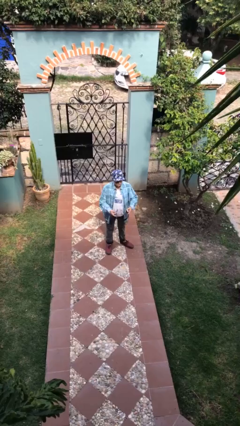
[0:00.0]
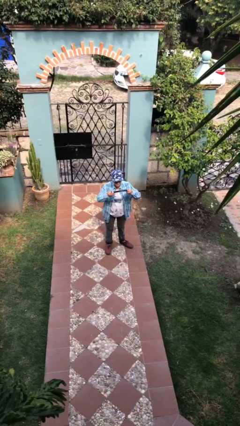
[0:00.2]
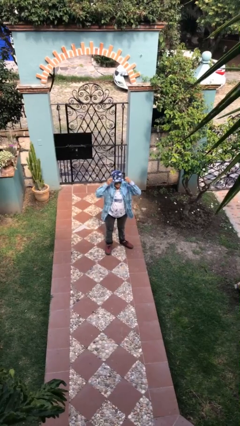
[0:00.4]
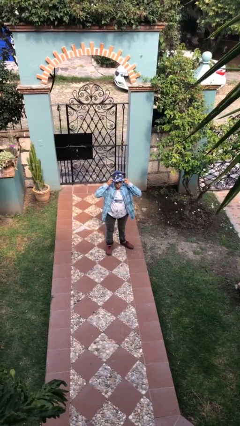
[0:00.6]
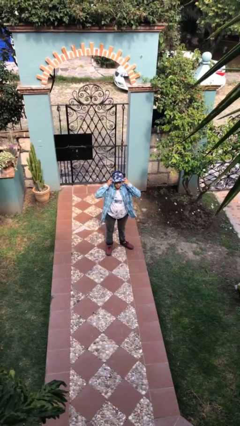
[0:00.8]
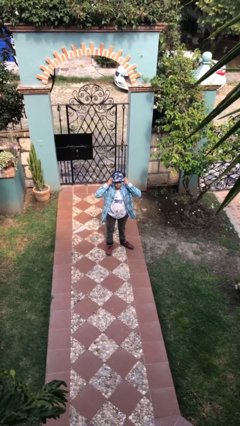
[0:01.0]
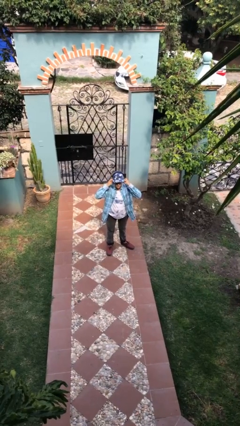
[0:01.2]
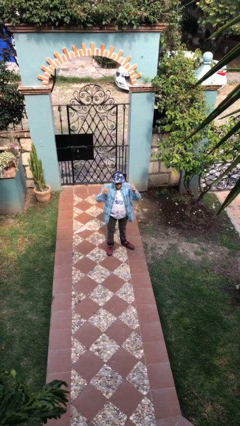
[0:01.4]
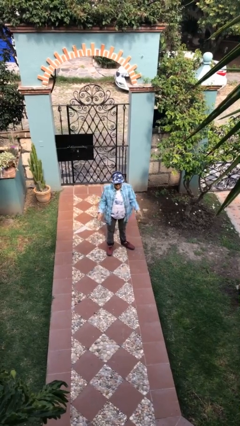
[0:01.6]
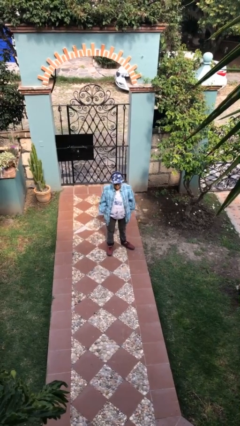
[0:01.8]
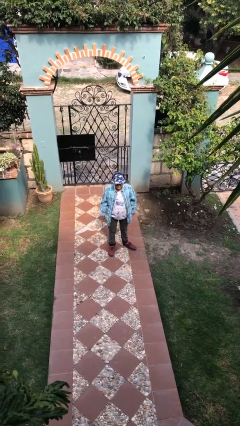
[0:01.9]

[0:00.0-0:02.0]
person puts on headphones

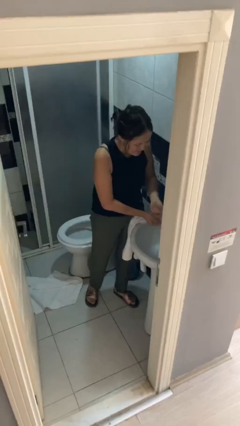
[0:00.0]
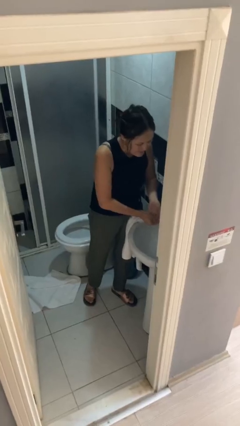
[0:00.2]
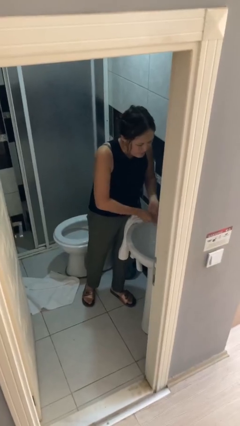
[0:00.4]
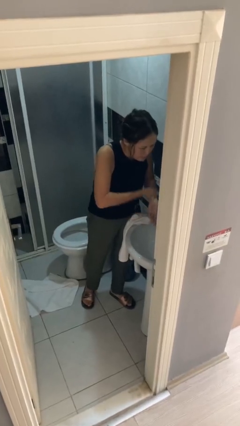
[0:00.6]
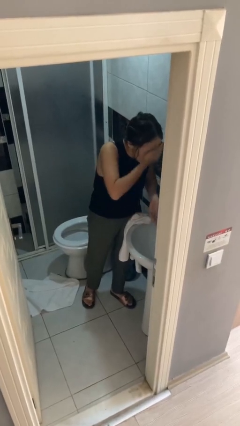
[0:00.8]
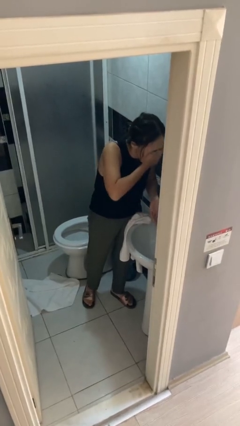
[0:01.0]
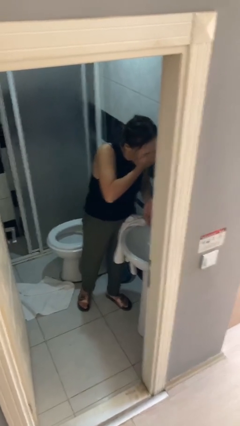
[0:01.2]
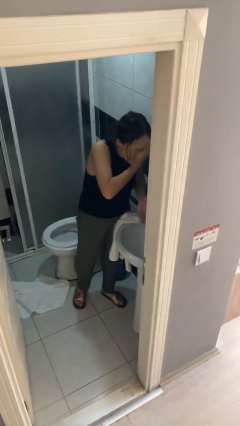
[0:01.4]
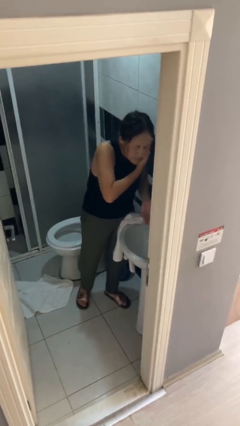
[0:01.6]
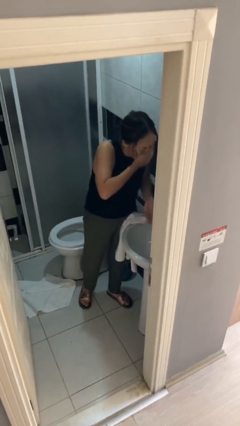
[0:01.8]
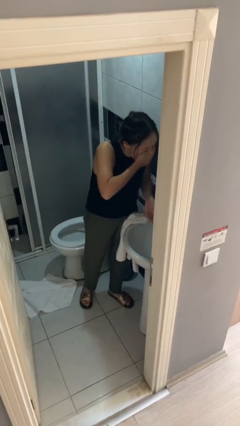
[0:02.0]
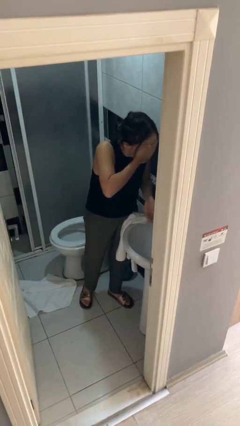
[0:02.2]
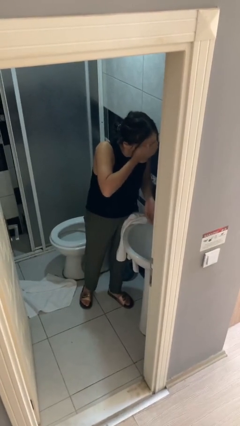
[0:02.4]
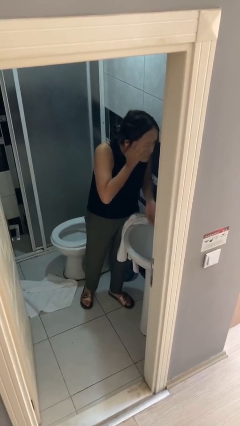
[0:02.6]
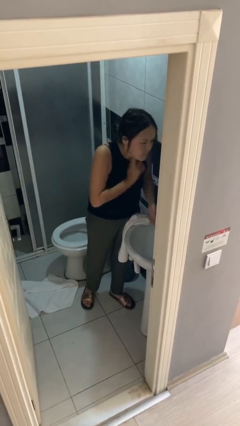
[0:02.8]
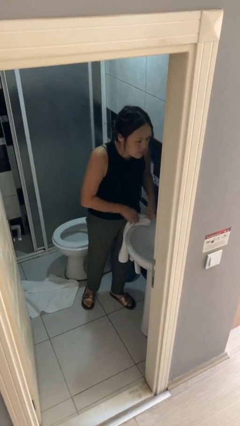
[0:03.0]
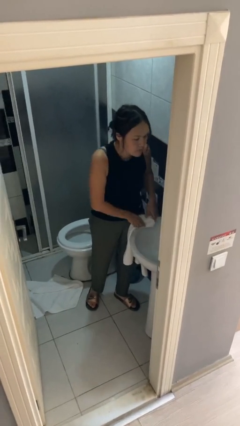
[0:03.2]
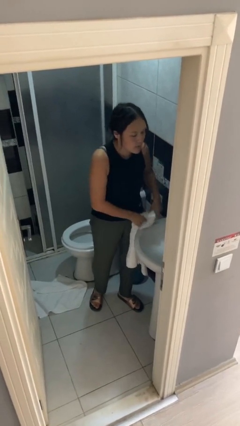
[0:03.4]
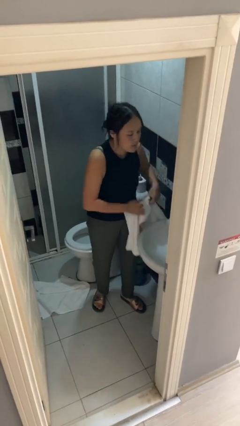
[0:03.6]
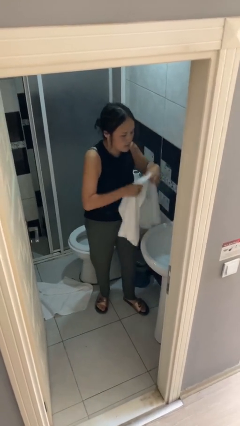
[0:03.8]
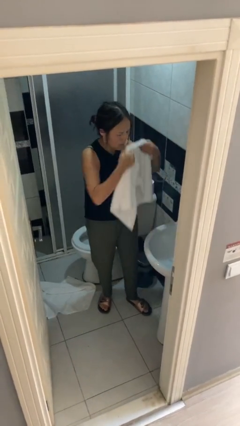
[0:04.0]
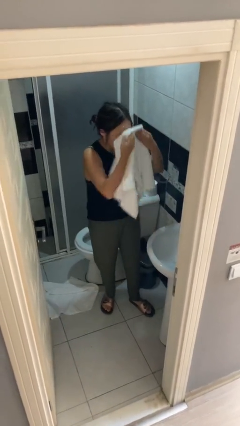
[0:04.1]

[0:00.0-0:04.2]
person washes face

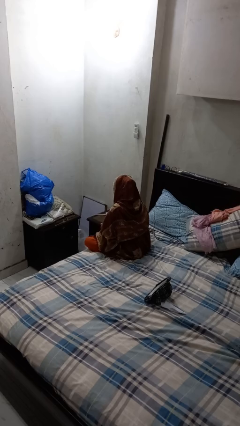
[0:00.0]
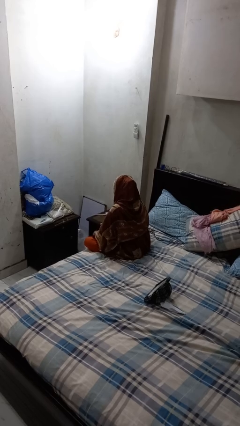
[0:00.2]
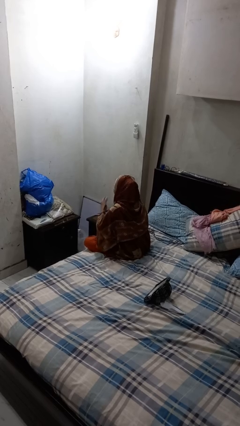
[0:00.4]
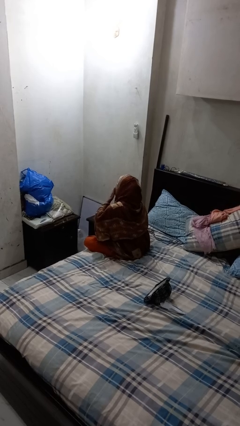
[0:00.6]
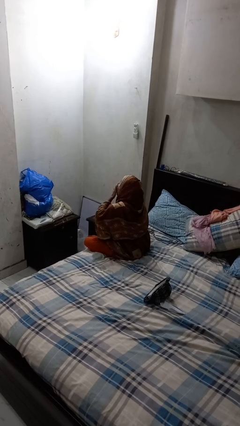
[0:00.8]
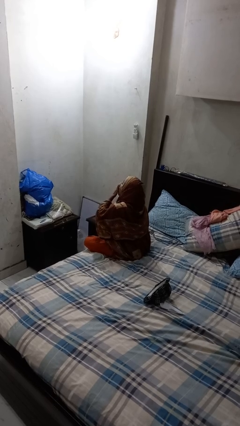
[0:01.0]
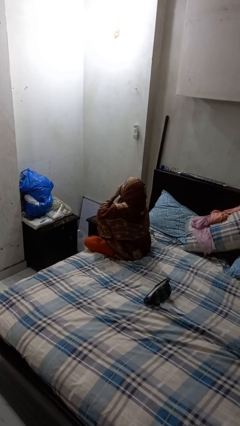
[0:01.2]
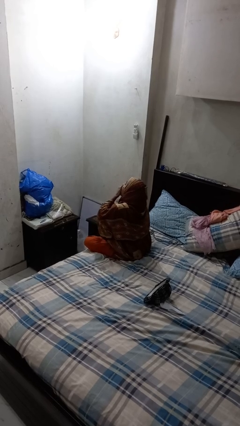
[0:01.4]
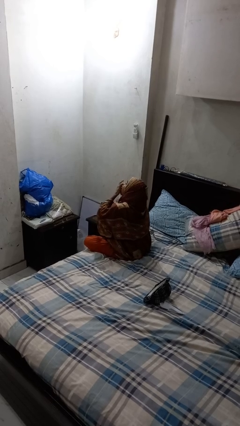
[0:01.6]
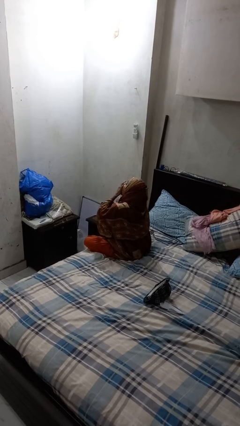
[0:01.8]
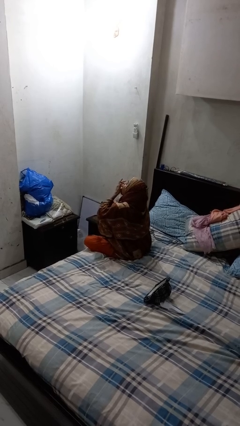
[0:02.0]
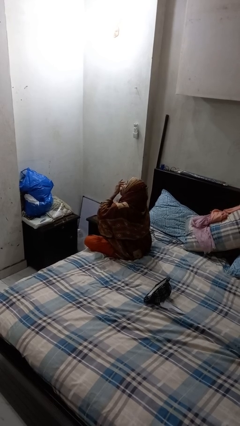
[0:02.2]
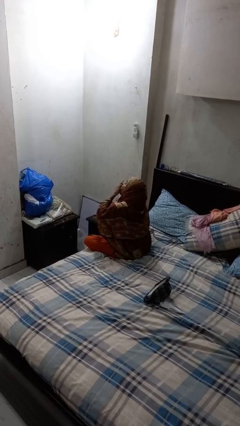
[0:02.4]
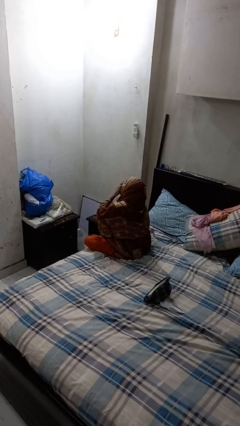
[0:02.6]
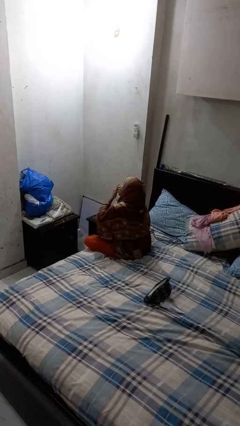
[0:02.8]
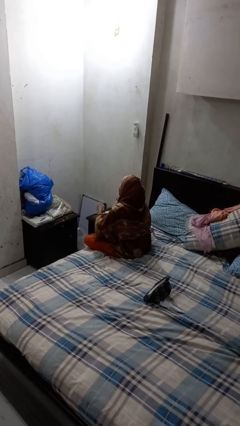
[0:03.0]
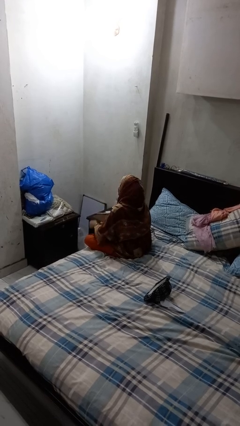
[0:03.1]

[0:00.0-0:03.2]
person yawns

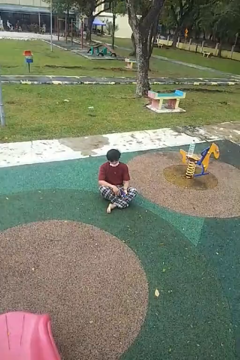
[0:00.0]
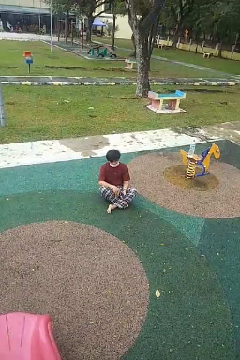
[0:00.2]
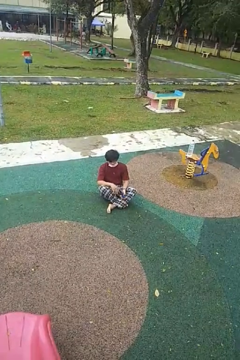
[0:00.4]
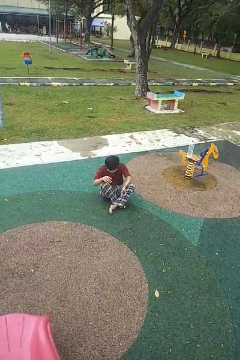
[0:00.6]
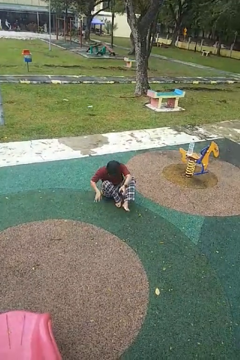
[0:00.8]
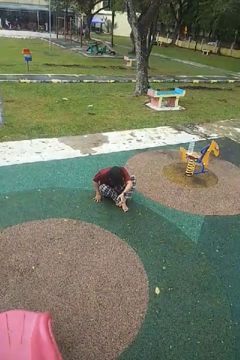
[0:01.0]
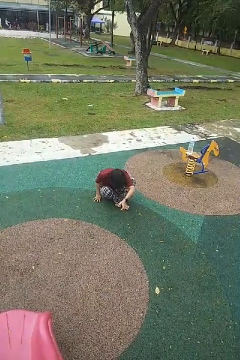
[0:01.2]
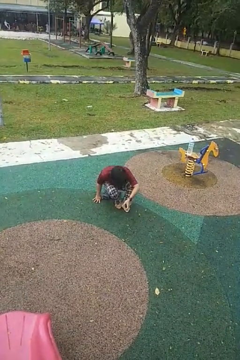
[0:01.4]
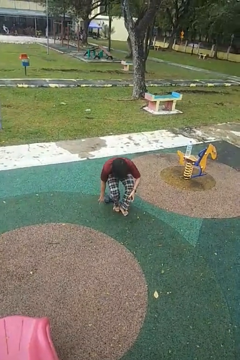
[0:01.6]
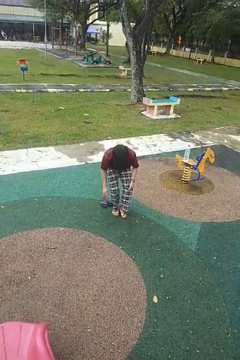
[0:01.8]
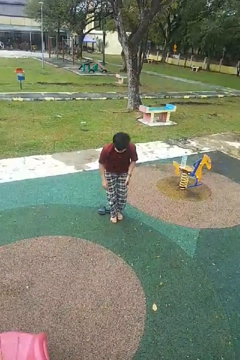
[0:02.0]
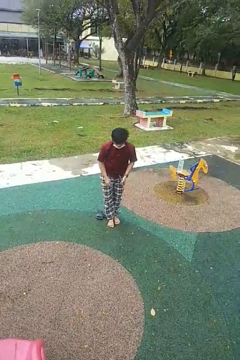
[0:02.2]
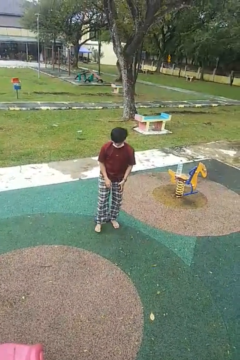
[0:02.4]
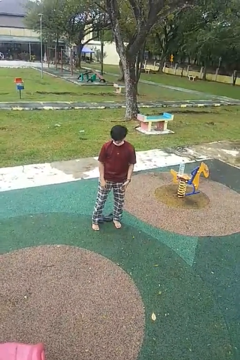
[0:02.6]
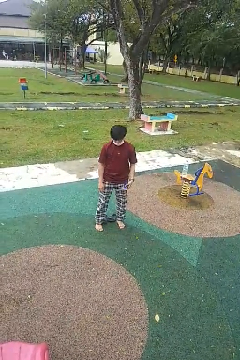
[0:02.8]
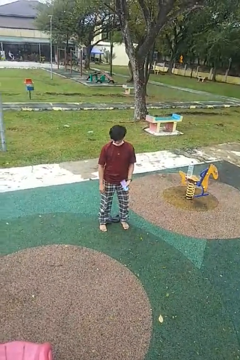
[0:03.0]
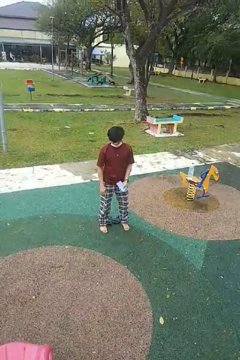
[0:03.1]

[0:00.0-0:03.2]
person stands up from floor

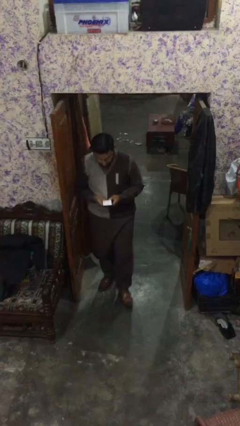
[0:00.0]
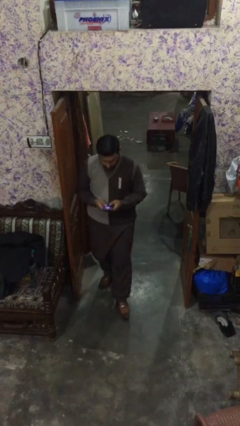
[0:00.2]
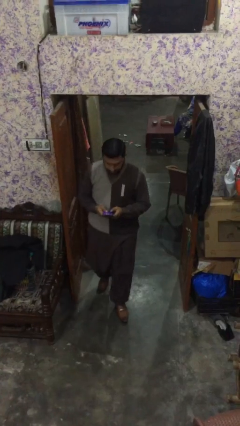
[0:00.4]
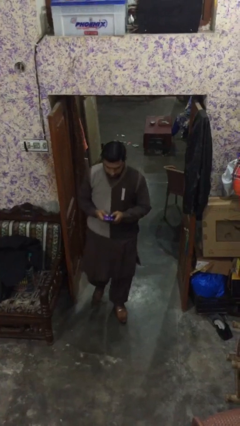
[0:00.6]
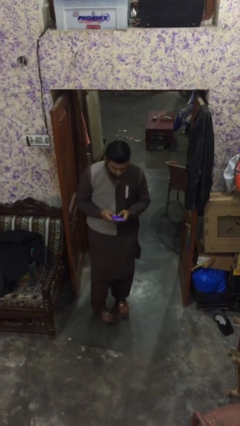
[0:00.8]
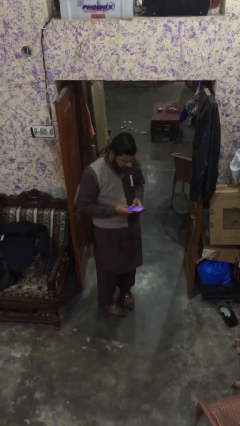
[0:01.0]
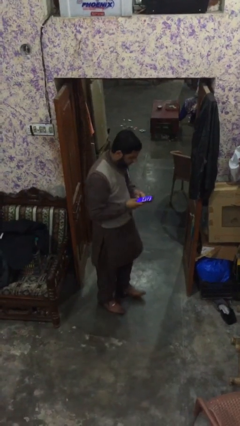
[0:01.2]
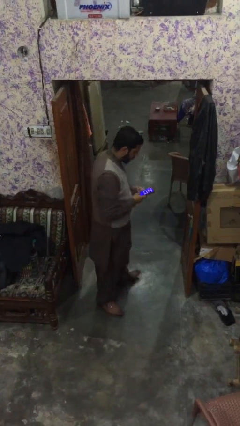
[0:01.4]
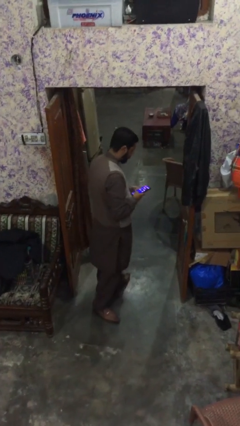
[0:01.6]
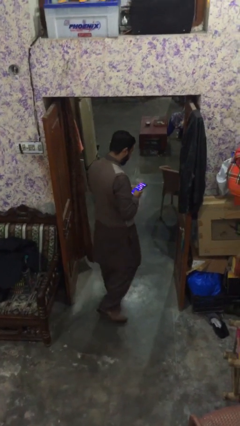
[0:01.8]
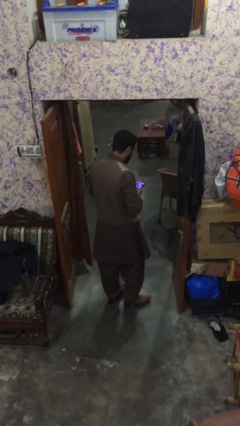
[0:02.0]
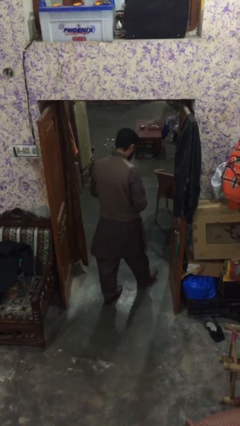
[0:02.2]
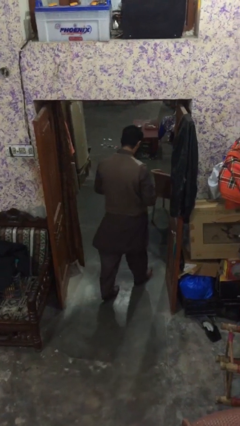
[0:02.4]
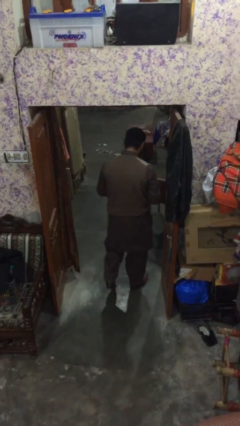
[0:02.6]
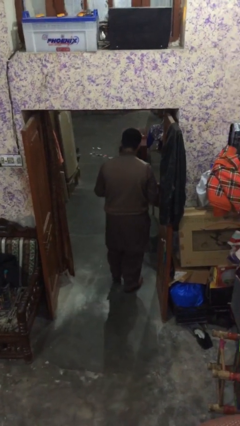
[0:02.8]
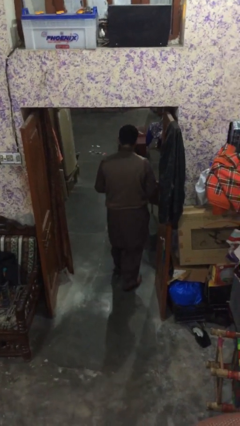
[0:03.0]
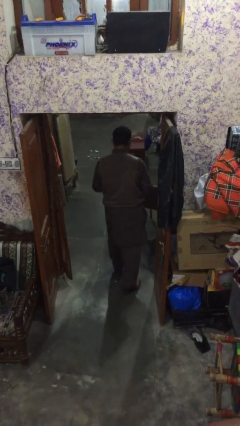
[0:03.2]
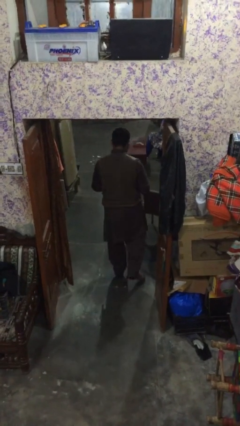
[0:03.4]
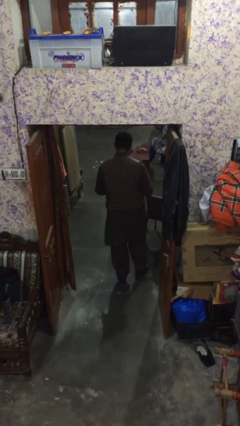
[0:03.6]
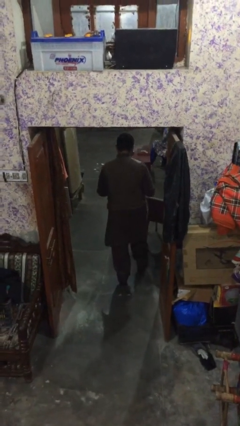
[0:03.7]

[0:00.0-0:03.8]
person exits scene through structure

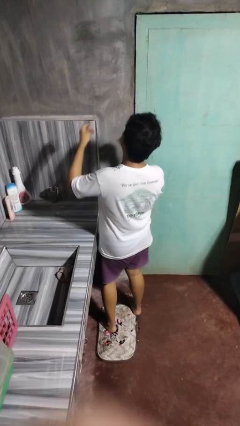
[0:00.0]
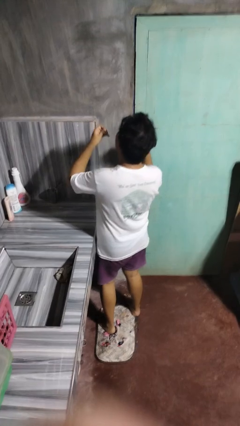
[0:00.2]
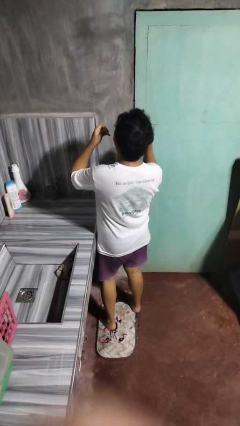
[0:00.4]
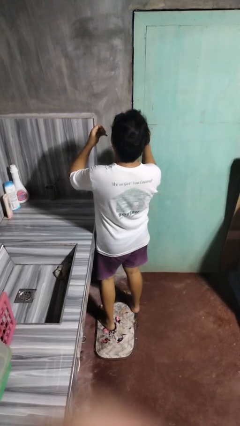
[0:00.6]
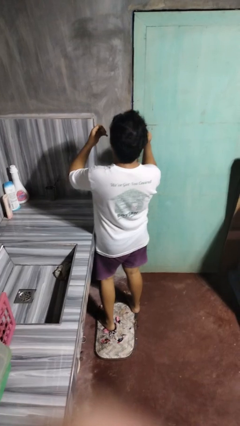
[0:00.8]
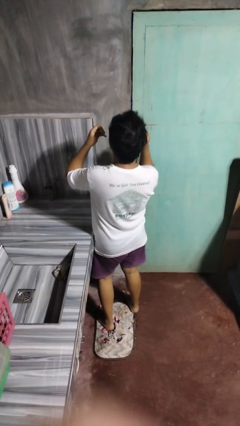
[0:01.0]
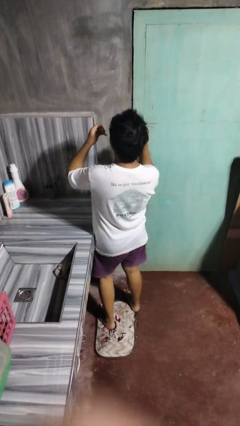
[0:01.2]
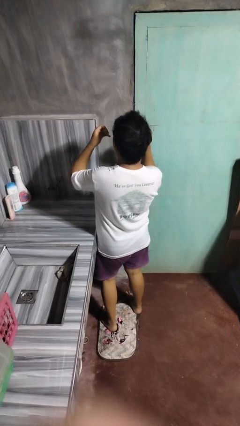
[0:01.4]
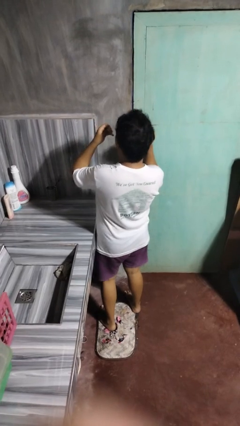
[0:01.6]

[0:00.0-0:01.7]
person flosses
